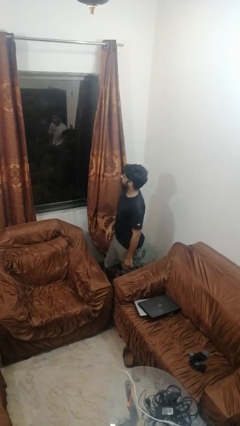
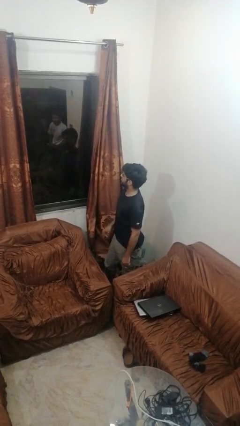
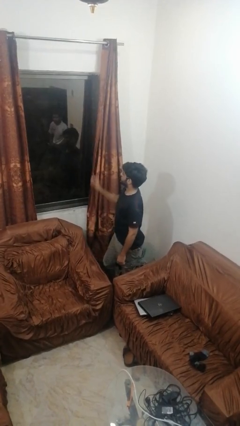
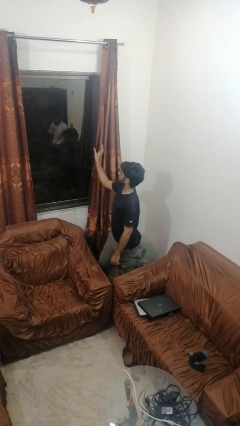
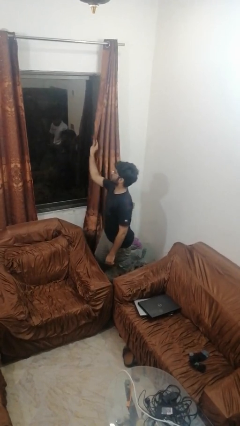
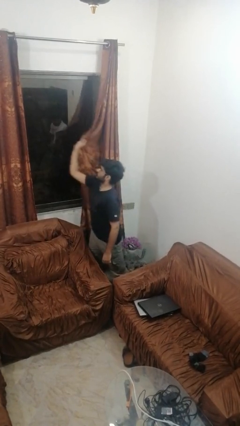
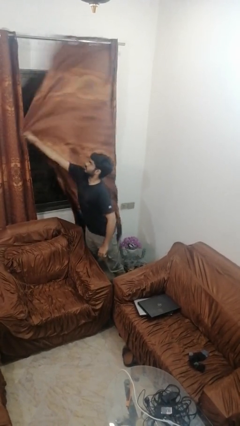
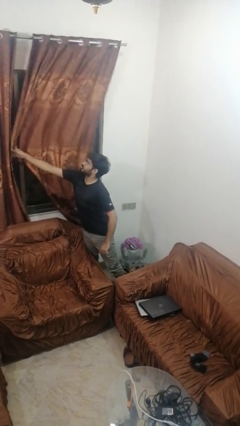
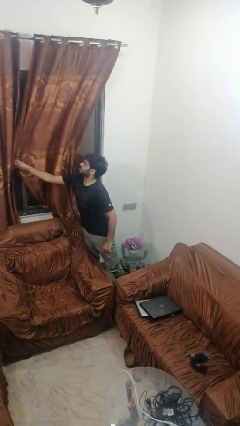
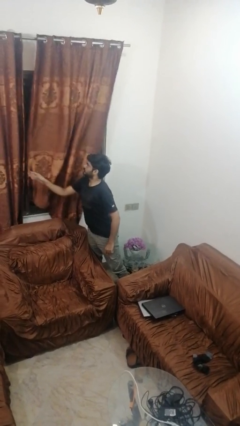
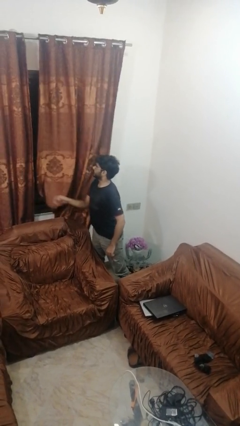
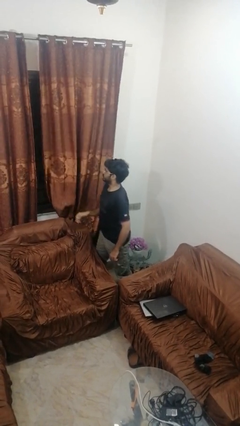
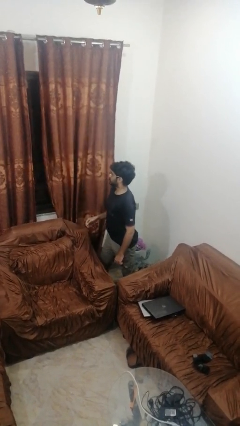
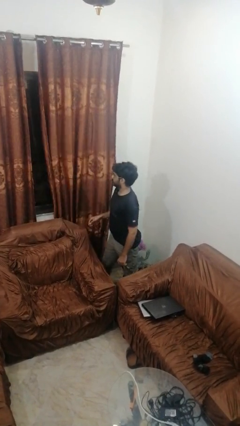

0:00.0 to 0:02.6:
person closes curtains

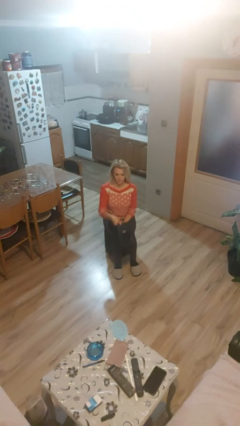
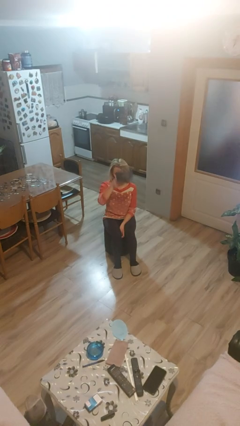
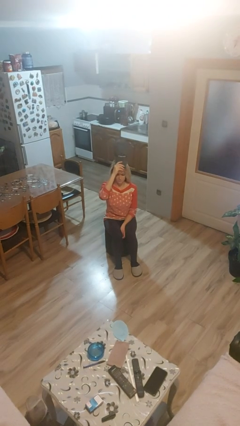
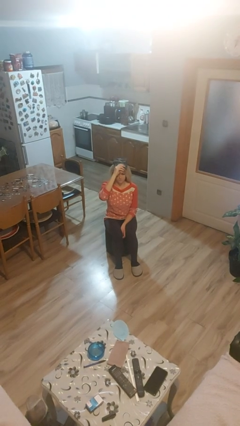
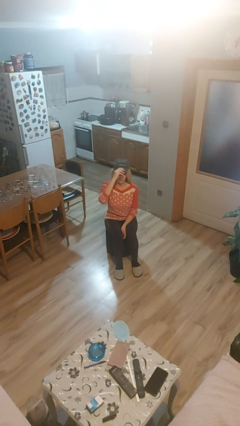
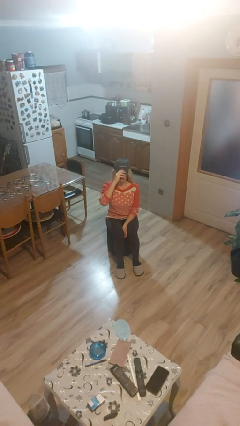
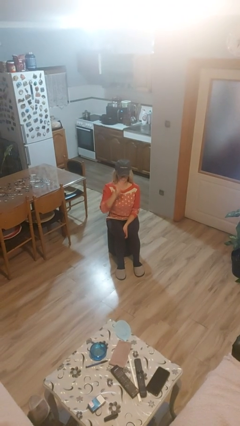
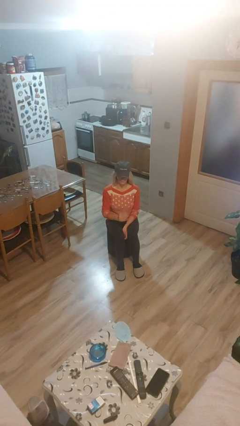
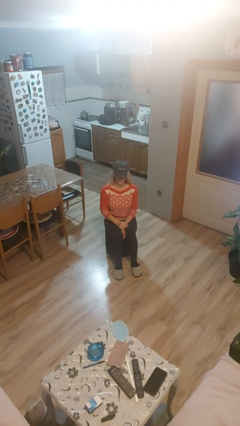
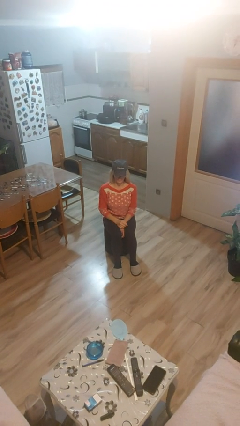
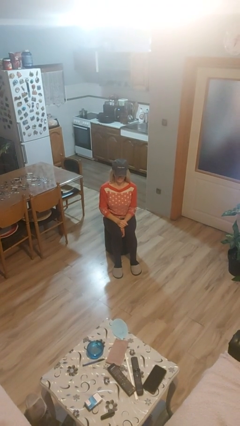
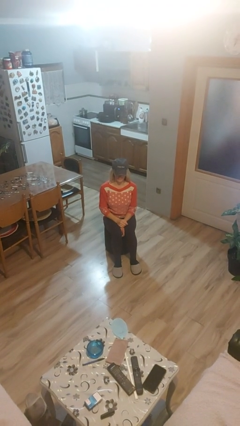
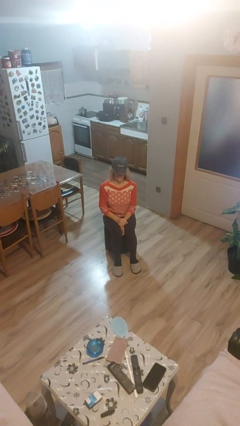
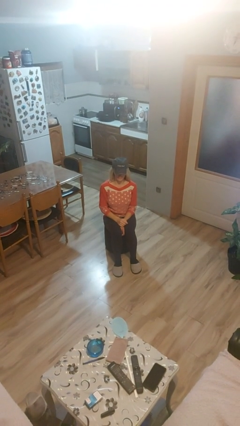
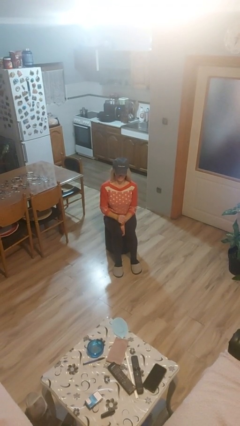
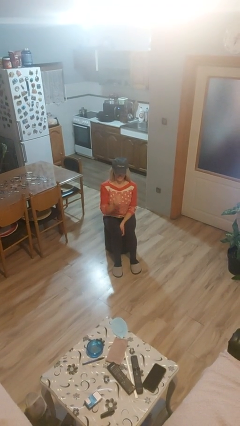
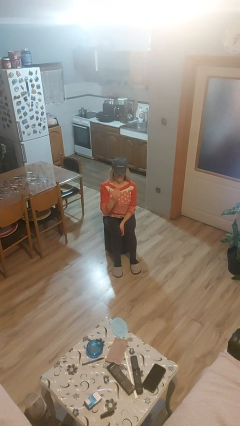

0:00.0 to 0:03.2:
person puts on hat

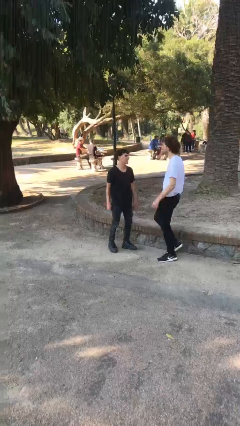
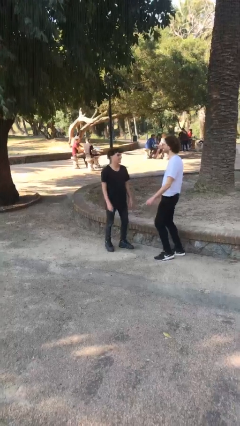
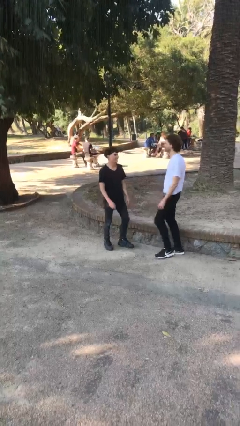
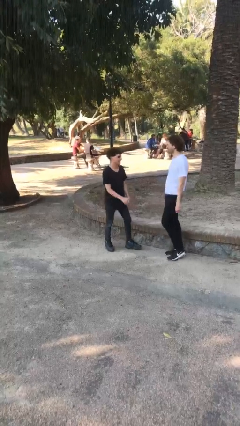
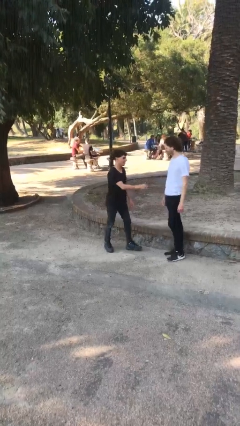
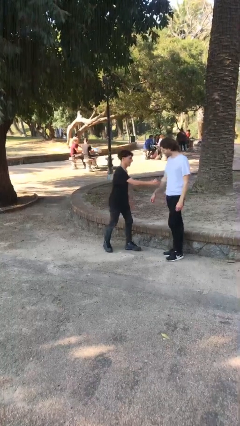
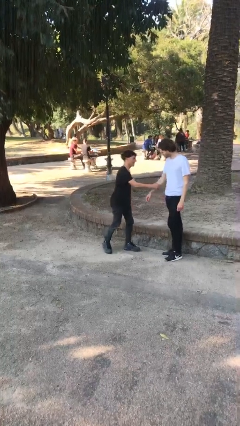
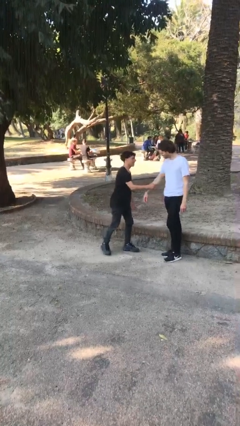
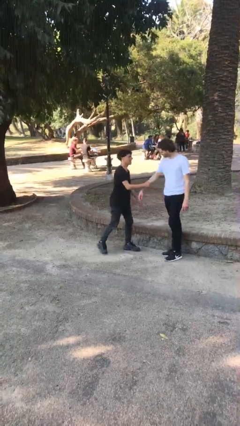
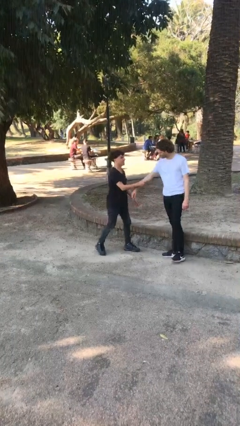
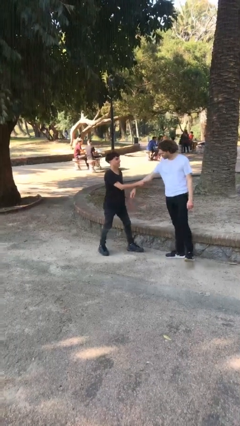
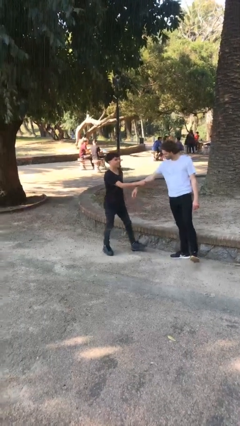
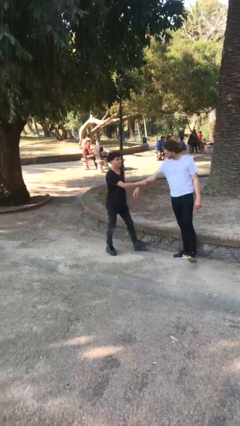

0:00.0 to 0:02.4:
person grabs person by forearm

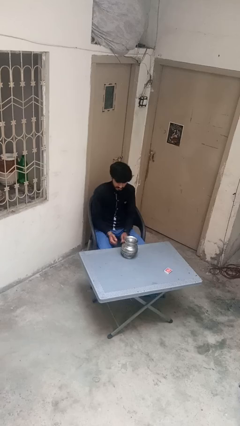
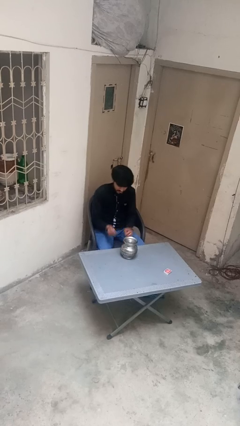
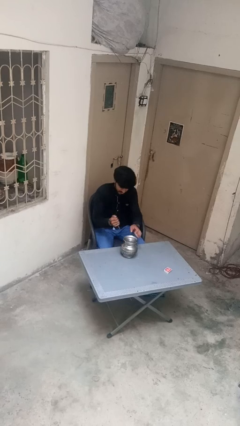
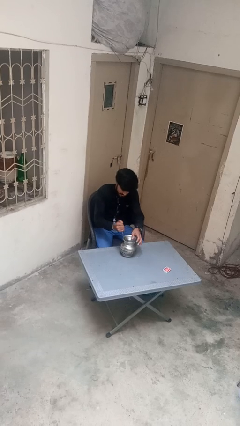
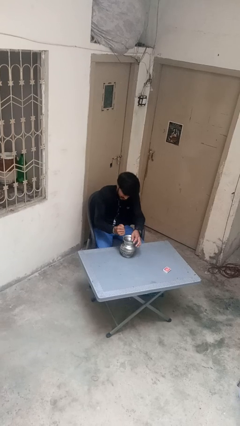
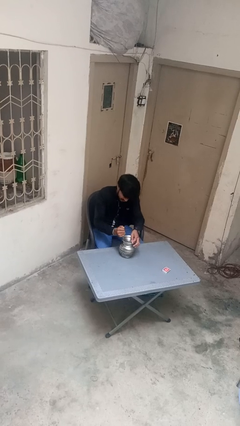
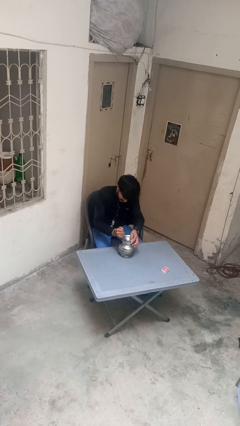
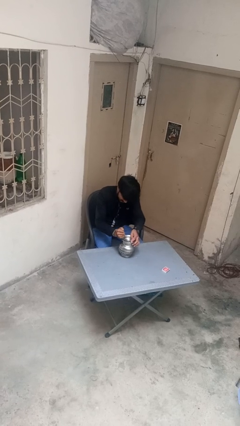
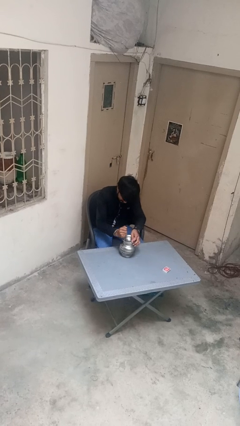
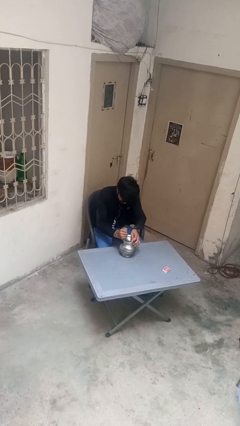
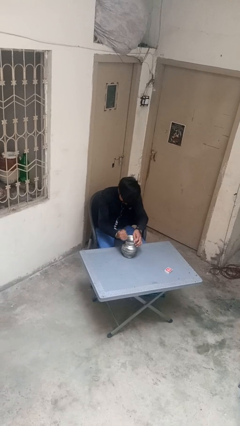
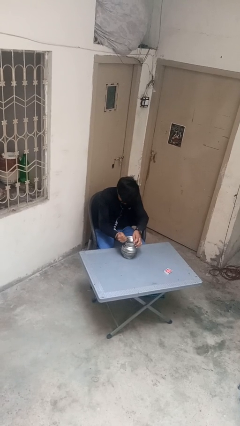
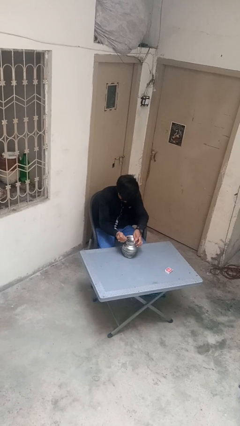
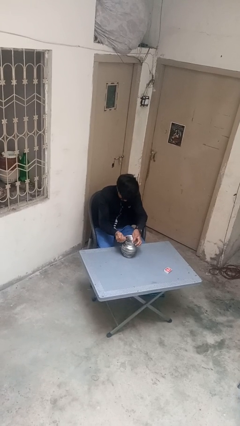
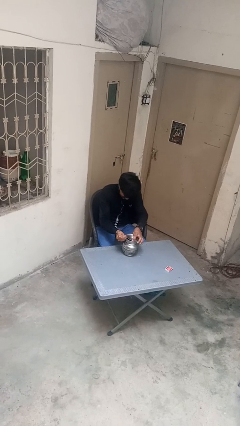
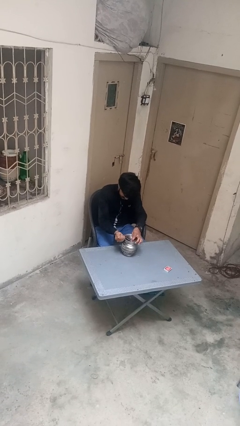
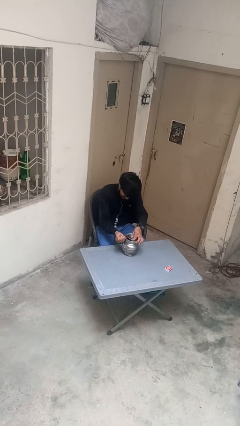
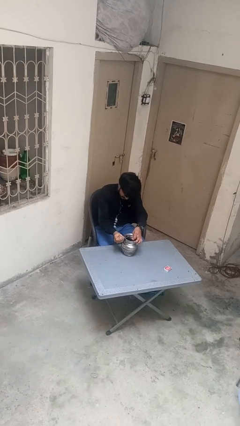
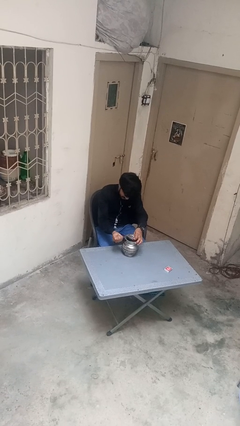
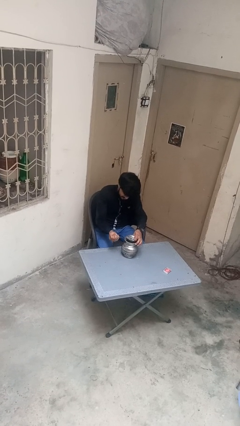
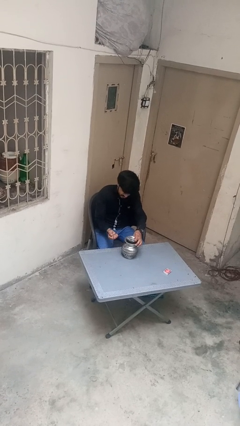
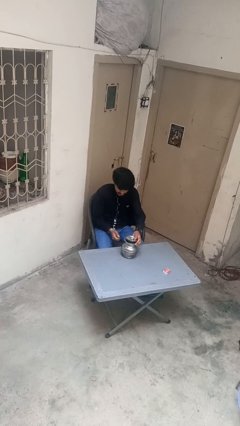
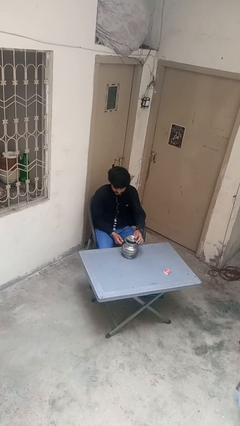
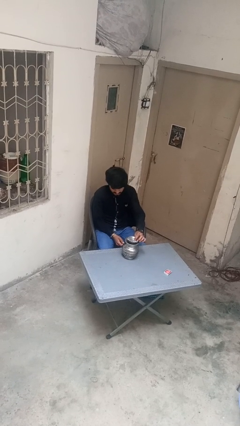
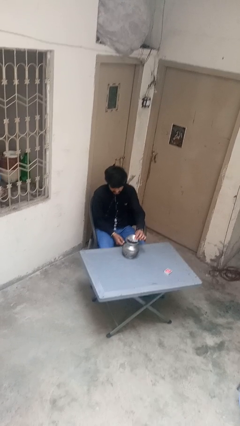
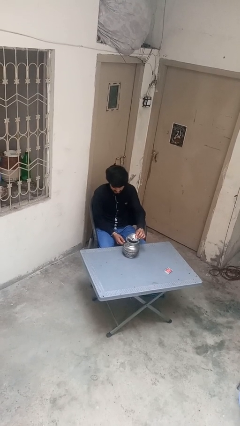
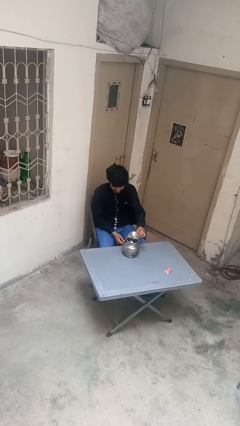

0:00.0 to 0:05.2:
person opens can with can opener

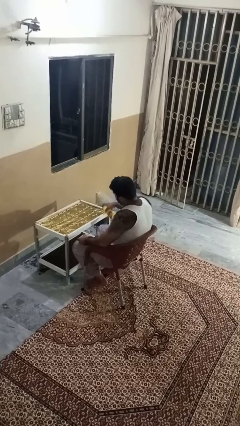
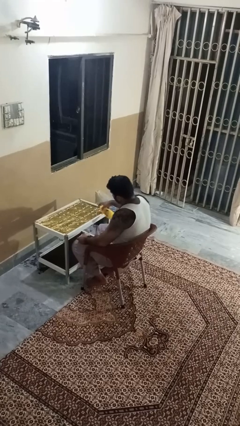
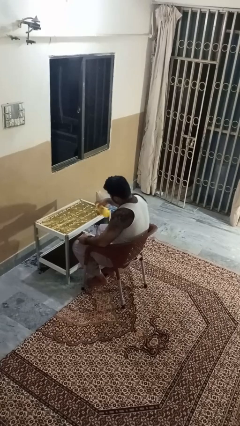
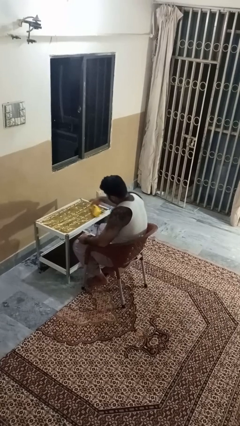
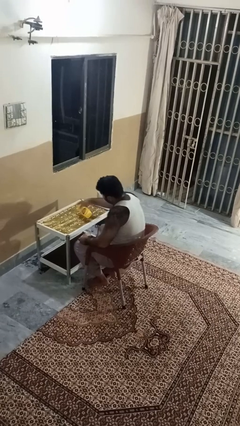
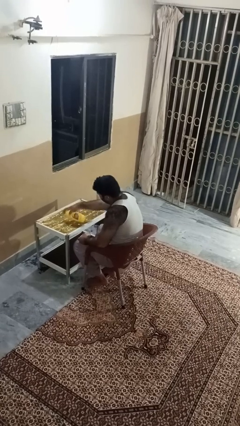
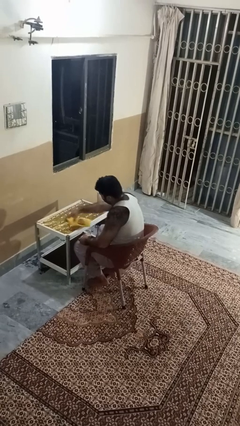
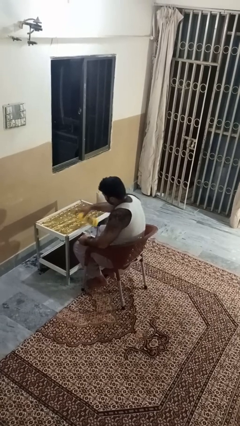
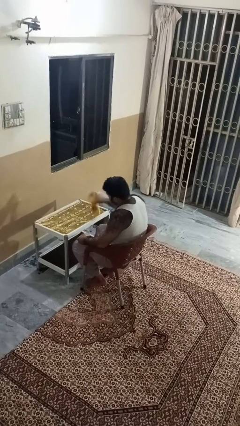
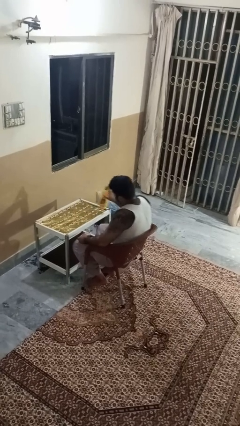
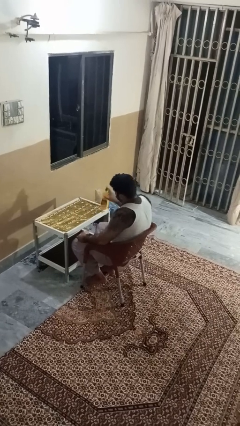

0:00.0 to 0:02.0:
person sprays from bottle

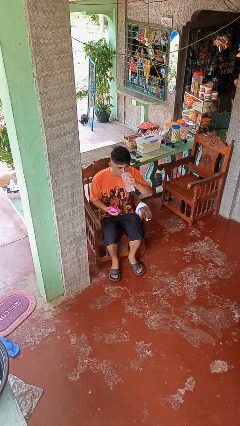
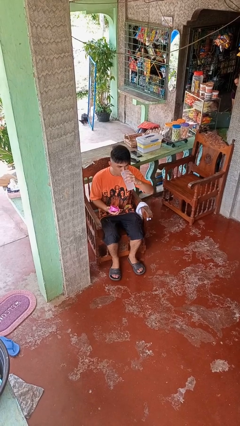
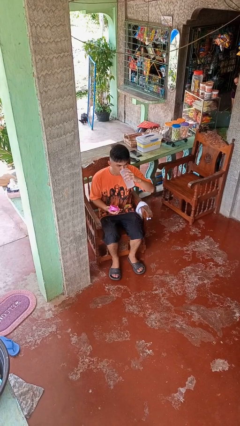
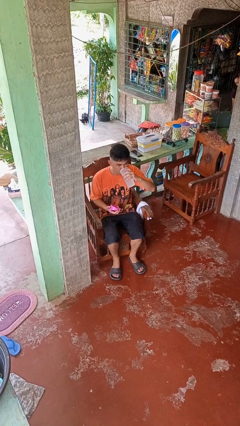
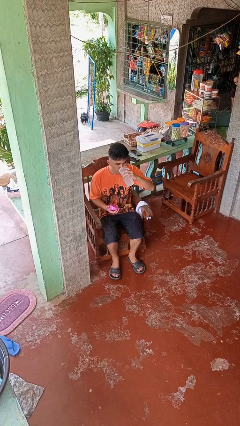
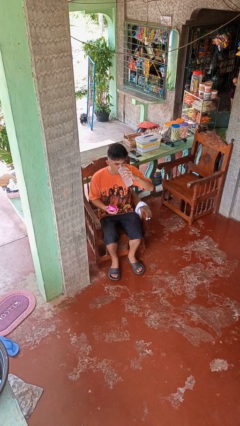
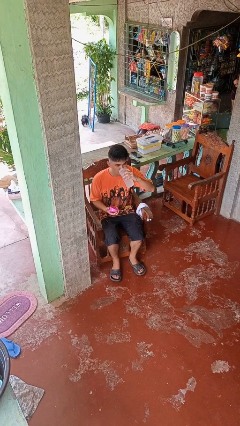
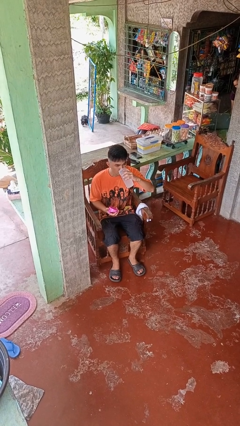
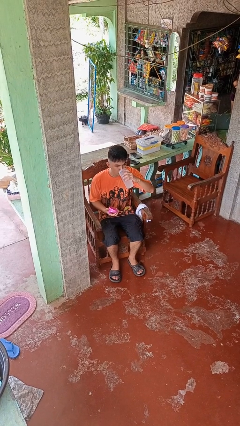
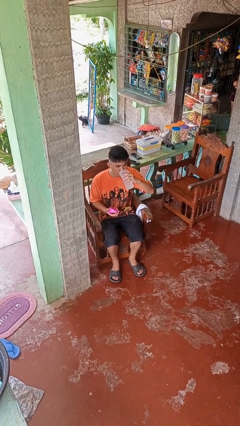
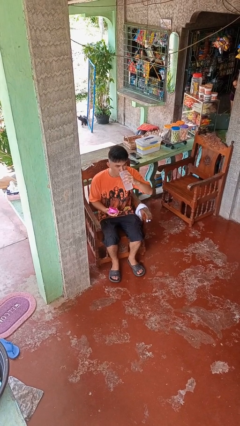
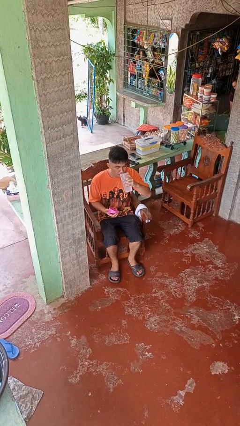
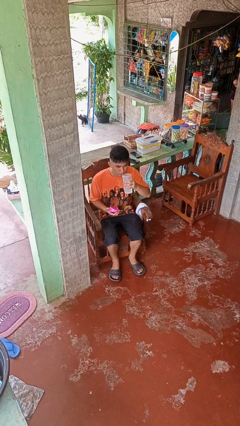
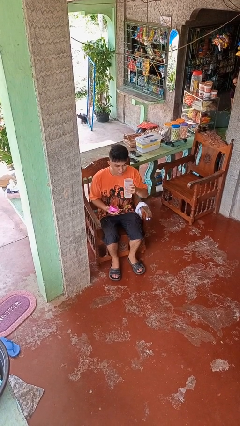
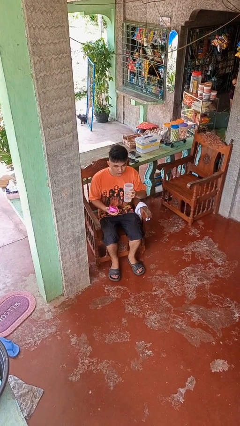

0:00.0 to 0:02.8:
person drinks from bottle
